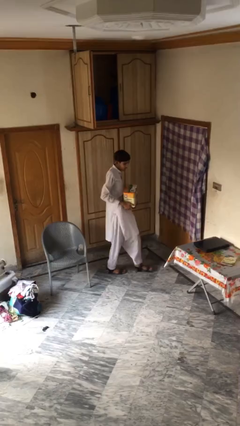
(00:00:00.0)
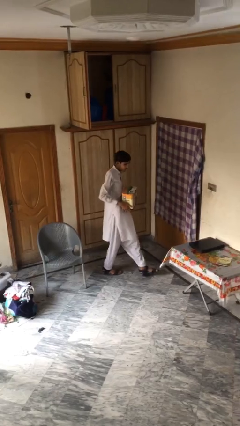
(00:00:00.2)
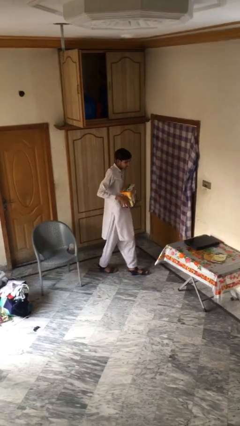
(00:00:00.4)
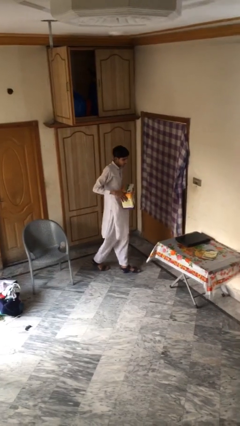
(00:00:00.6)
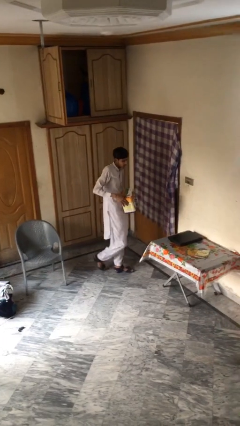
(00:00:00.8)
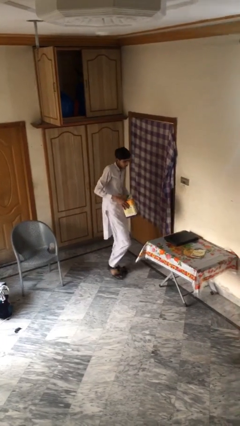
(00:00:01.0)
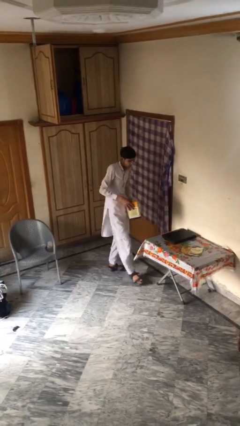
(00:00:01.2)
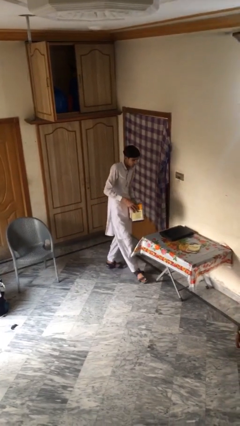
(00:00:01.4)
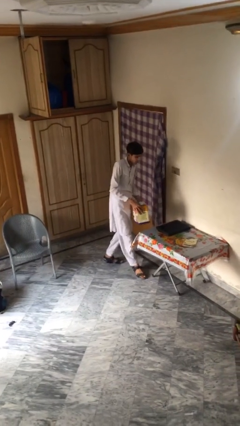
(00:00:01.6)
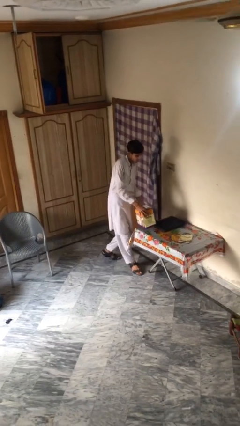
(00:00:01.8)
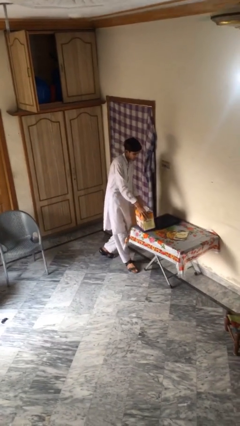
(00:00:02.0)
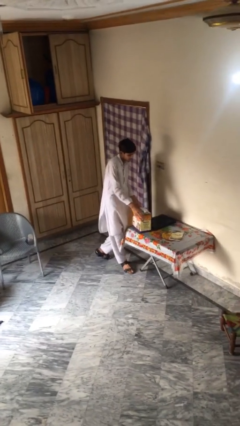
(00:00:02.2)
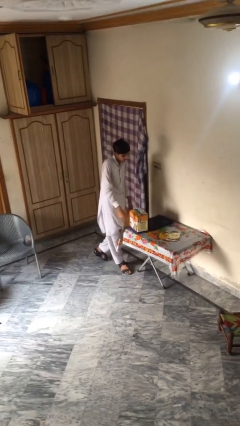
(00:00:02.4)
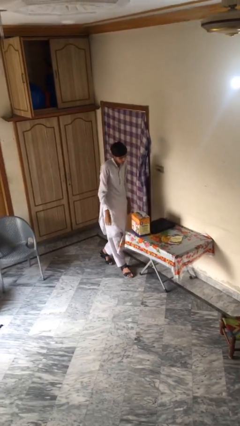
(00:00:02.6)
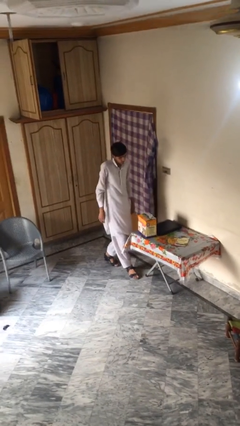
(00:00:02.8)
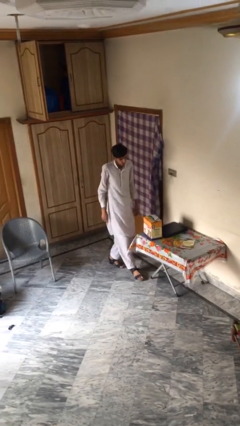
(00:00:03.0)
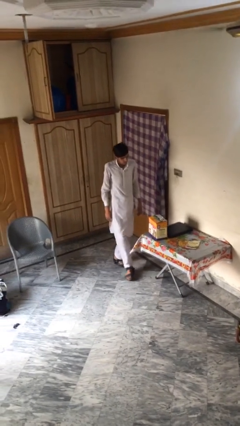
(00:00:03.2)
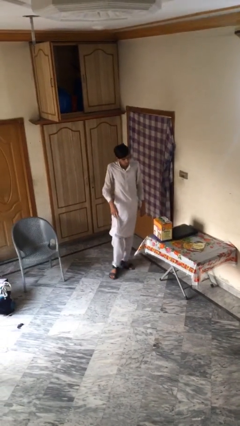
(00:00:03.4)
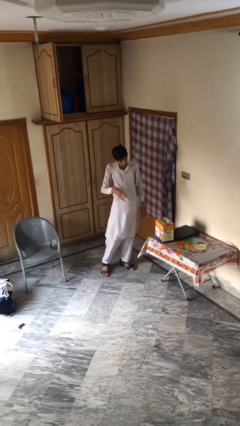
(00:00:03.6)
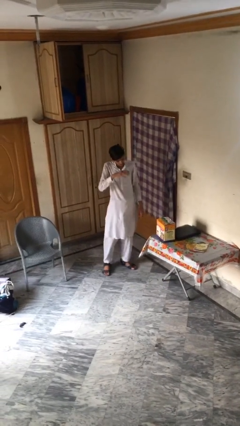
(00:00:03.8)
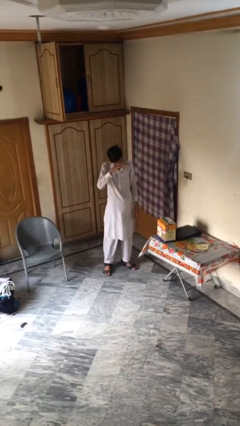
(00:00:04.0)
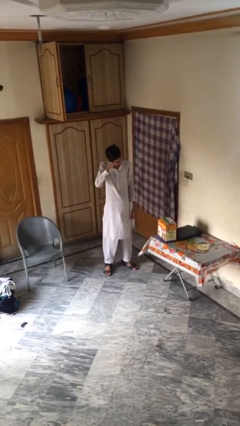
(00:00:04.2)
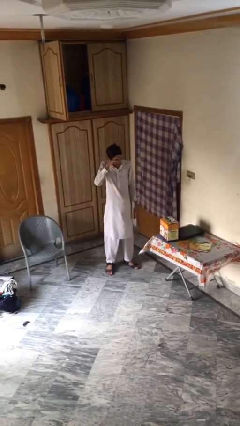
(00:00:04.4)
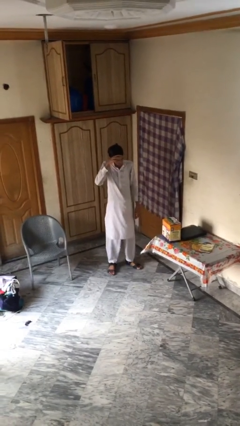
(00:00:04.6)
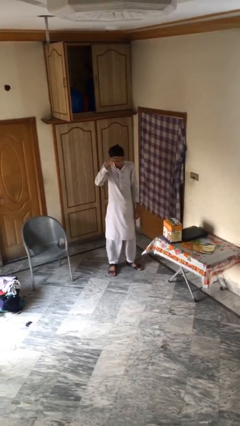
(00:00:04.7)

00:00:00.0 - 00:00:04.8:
person puts down object on table

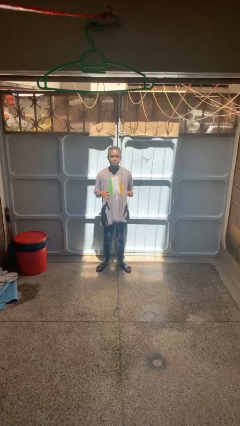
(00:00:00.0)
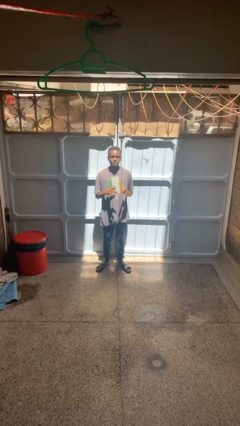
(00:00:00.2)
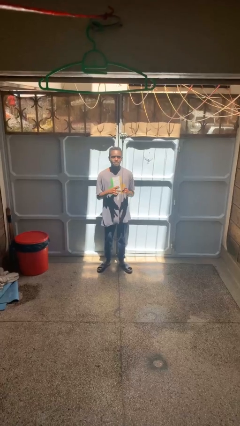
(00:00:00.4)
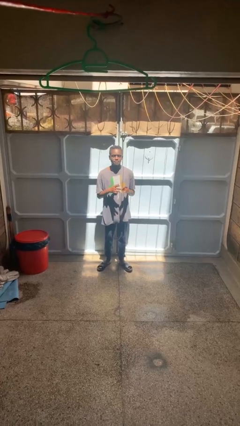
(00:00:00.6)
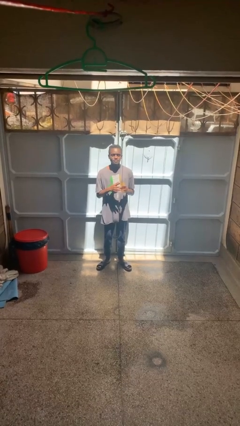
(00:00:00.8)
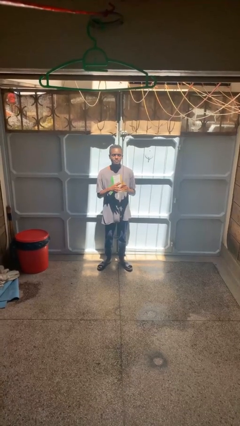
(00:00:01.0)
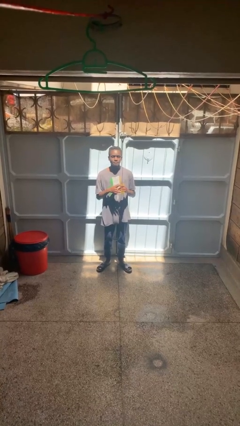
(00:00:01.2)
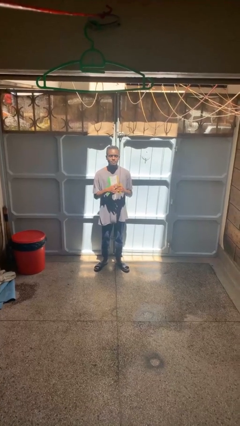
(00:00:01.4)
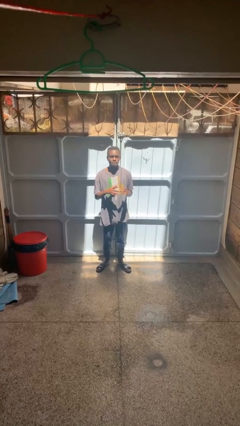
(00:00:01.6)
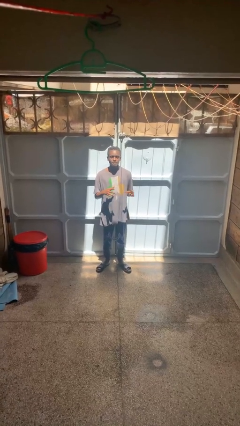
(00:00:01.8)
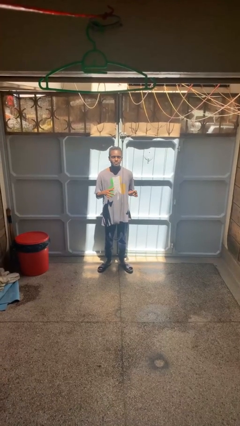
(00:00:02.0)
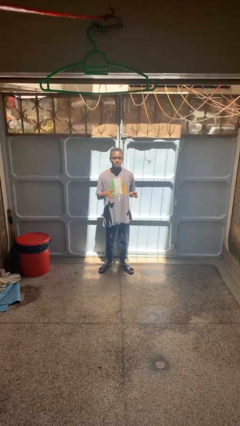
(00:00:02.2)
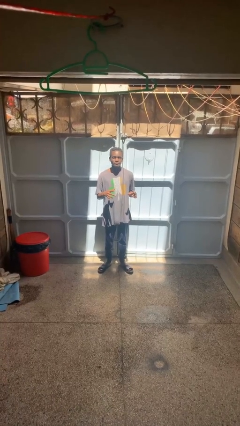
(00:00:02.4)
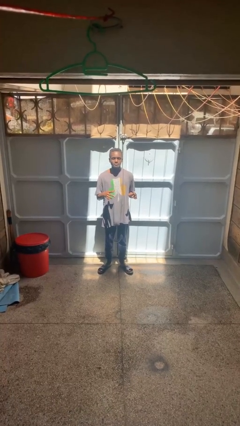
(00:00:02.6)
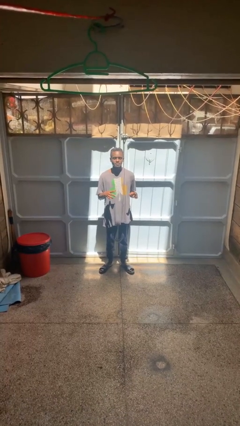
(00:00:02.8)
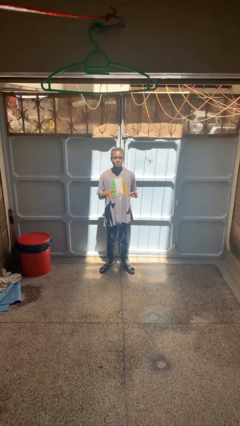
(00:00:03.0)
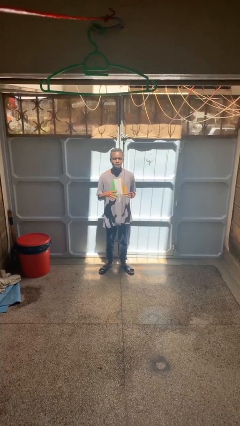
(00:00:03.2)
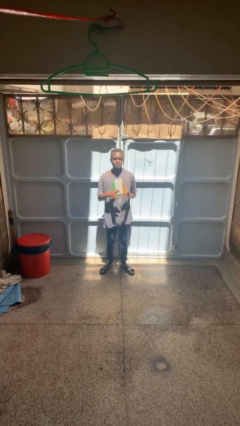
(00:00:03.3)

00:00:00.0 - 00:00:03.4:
person puts on ring

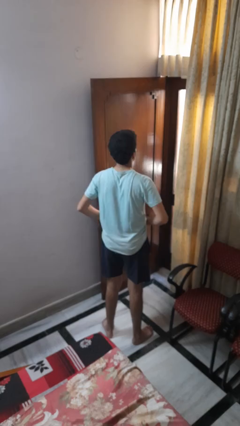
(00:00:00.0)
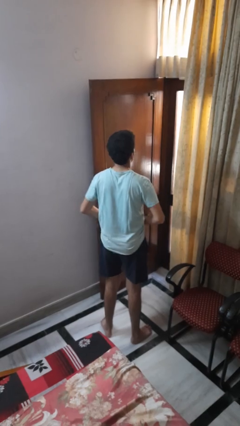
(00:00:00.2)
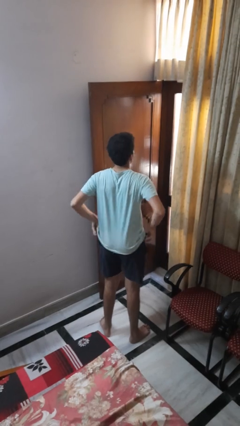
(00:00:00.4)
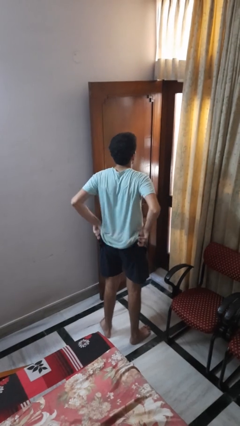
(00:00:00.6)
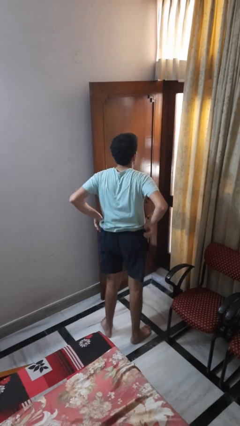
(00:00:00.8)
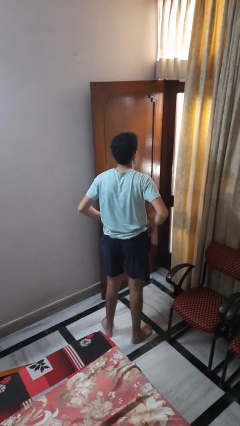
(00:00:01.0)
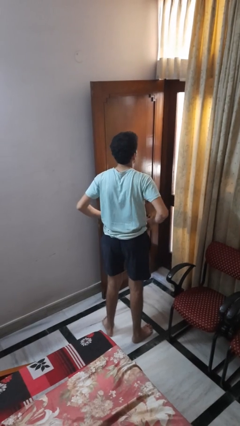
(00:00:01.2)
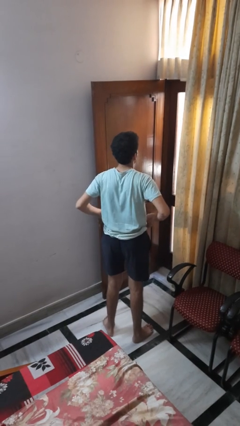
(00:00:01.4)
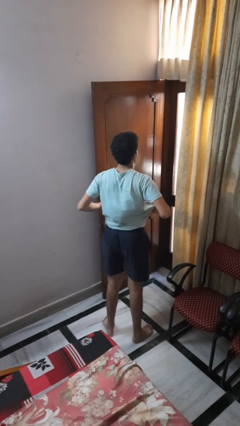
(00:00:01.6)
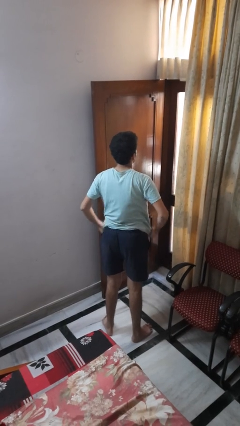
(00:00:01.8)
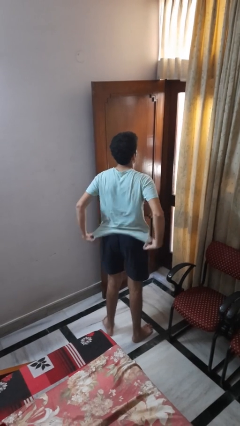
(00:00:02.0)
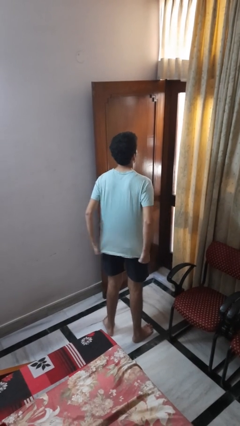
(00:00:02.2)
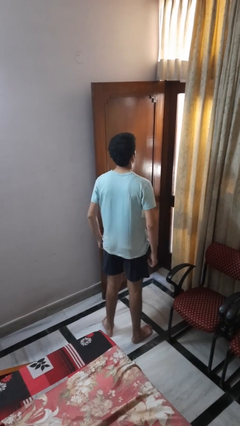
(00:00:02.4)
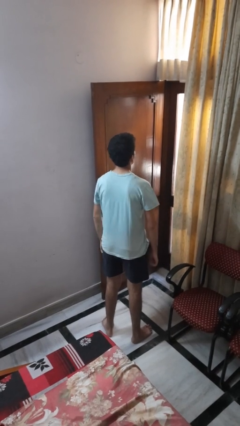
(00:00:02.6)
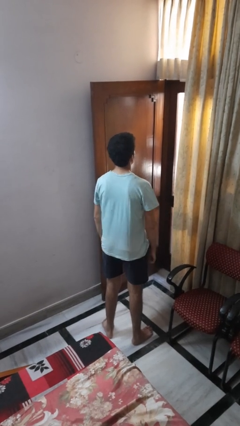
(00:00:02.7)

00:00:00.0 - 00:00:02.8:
person hikes up pants

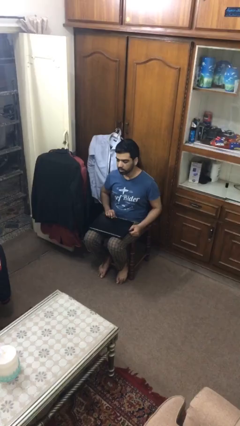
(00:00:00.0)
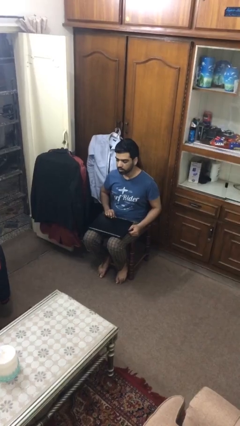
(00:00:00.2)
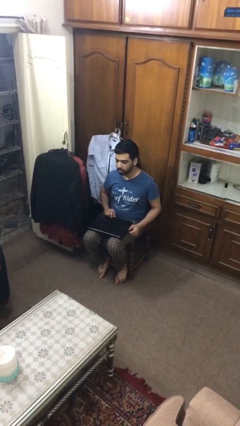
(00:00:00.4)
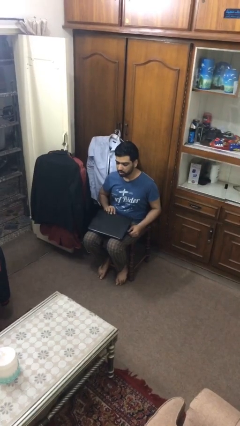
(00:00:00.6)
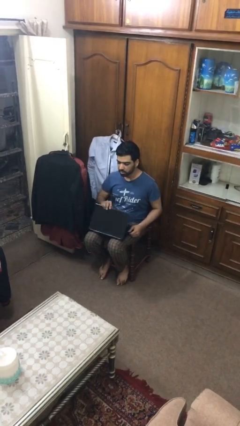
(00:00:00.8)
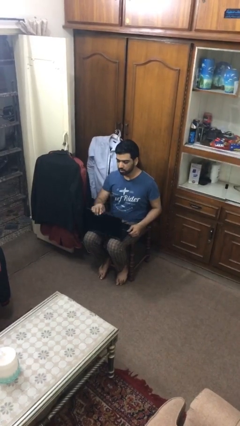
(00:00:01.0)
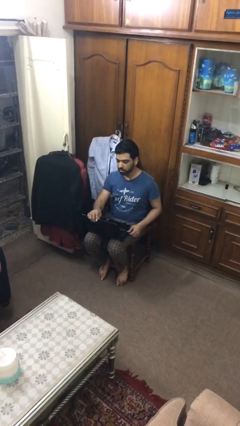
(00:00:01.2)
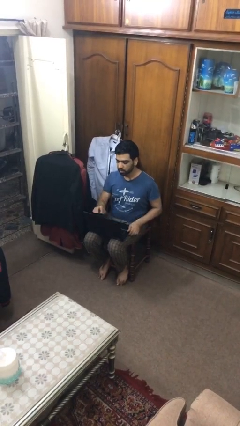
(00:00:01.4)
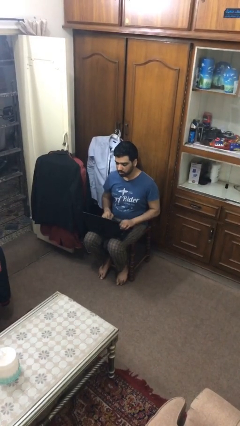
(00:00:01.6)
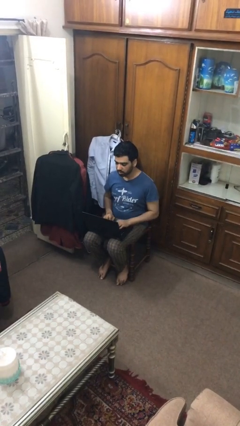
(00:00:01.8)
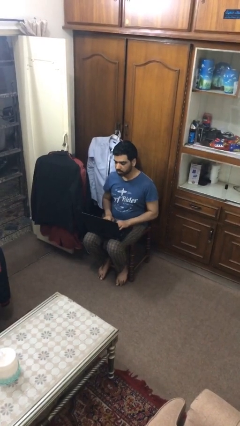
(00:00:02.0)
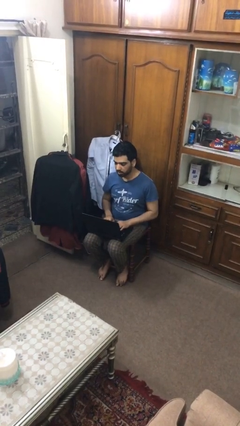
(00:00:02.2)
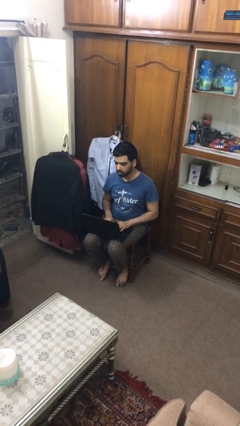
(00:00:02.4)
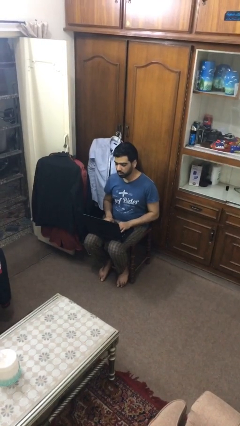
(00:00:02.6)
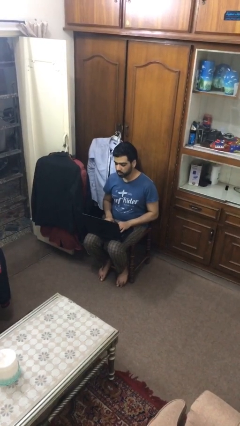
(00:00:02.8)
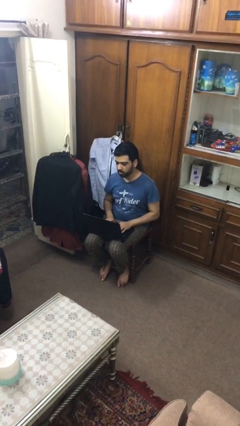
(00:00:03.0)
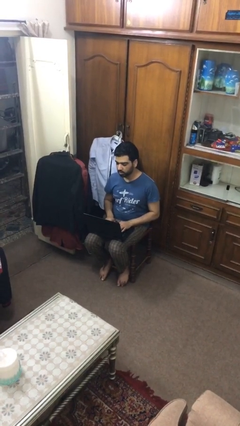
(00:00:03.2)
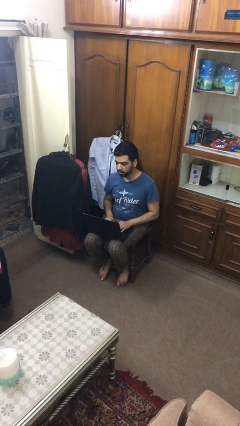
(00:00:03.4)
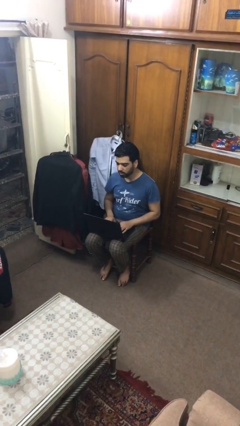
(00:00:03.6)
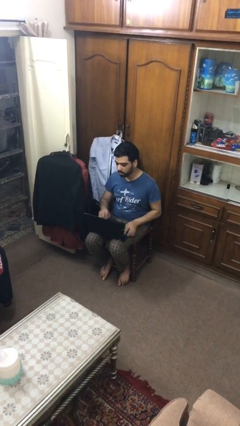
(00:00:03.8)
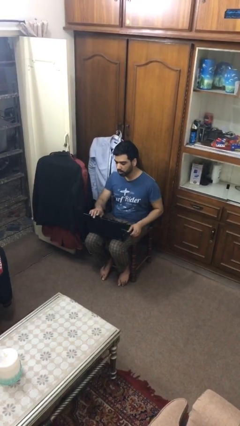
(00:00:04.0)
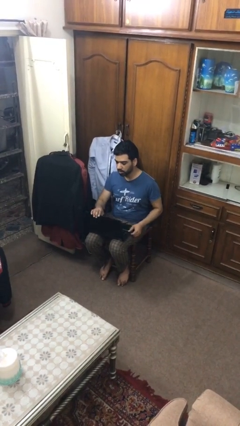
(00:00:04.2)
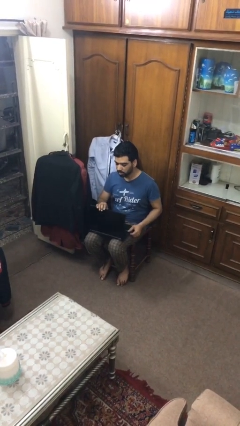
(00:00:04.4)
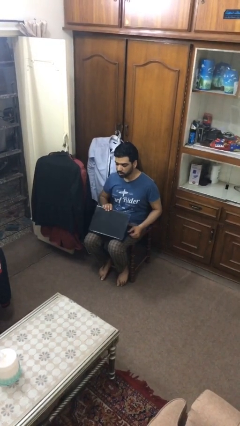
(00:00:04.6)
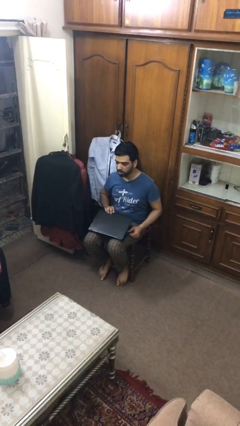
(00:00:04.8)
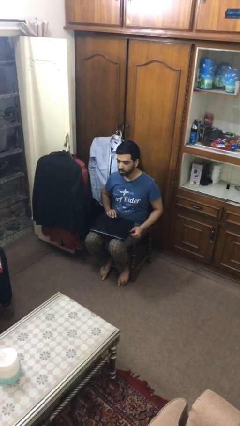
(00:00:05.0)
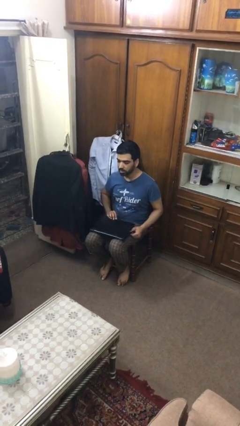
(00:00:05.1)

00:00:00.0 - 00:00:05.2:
person interacts with laptop

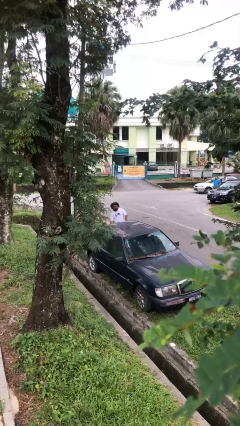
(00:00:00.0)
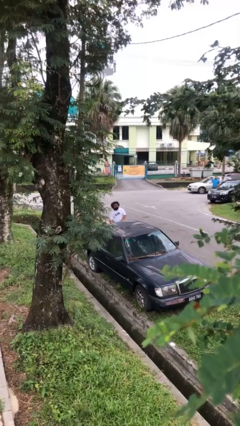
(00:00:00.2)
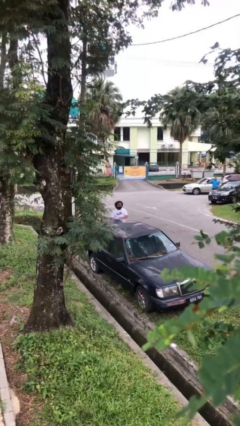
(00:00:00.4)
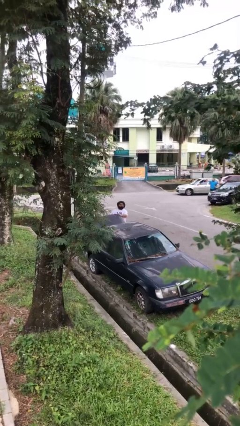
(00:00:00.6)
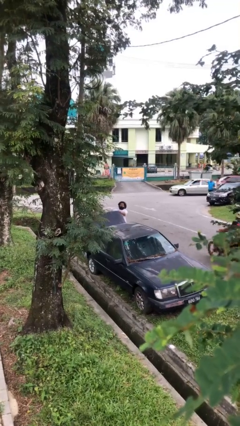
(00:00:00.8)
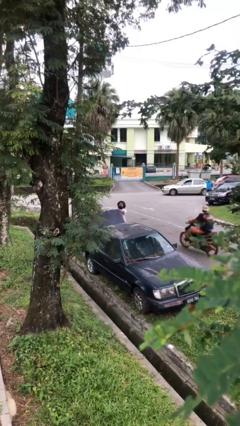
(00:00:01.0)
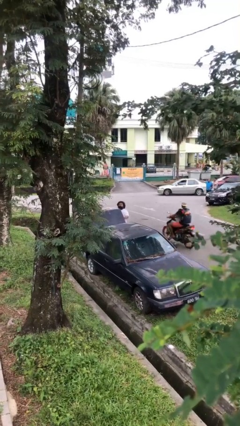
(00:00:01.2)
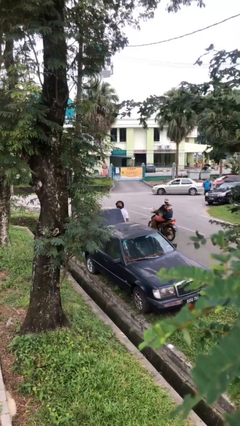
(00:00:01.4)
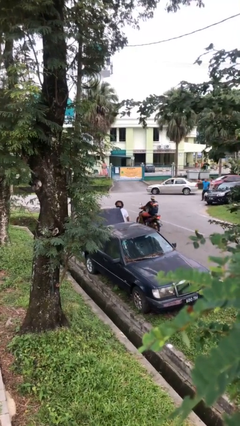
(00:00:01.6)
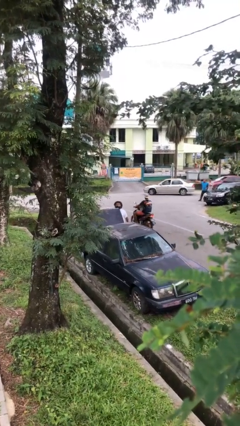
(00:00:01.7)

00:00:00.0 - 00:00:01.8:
person opens car trunk
